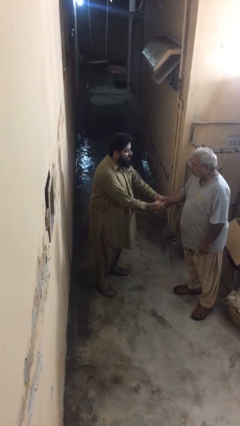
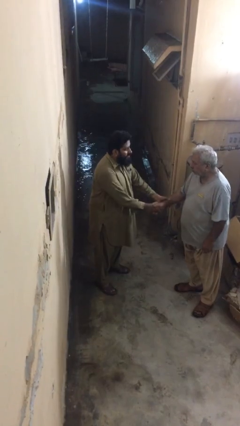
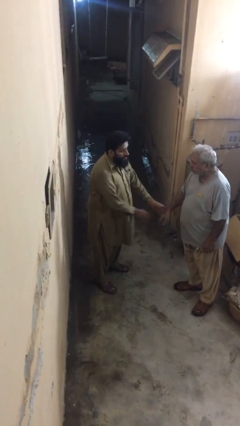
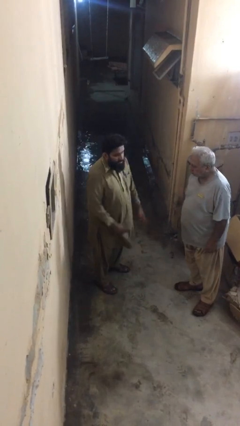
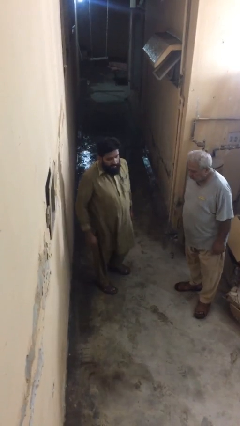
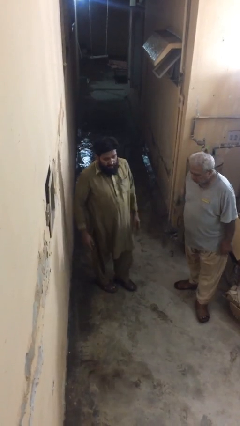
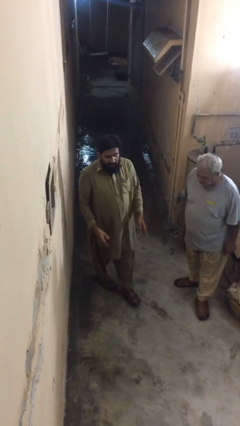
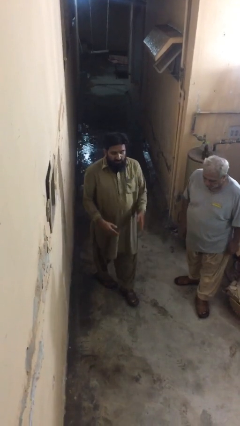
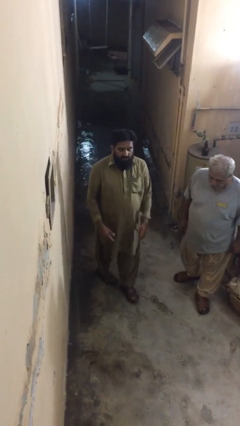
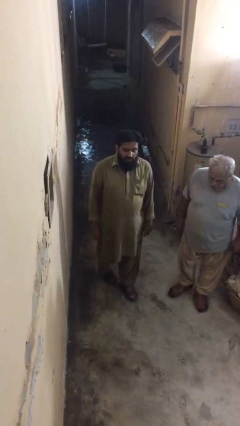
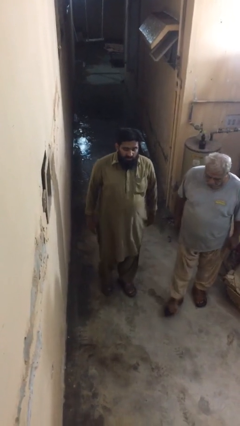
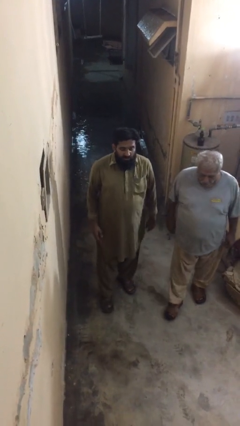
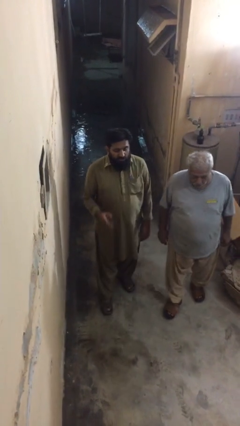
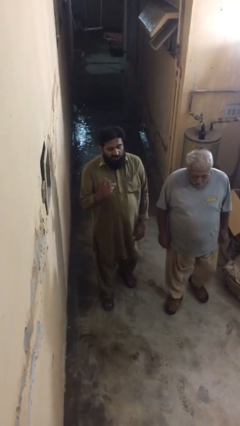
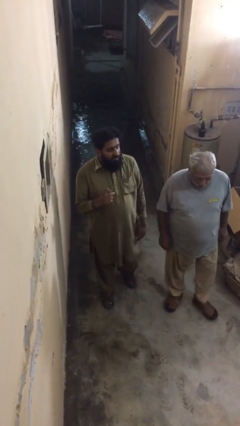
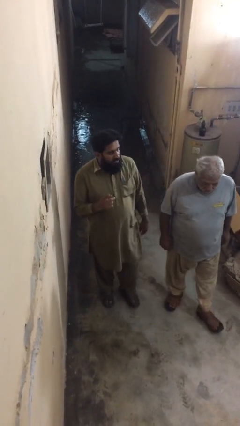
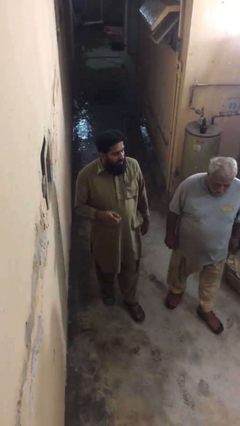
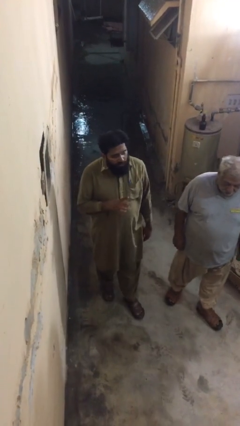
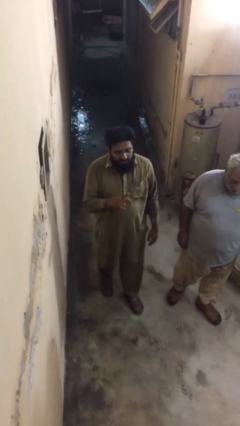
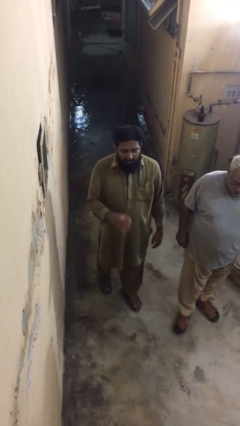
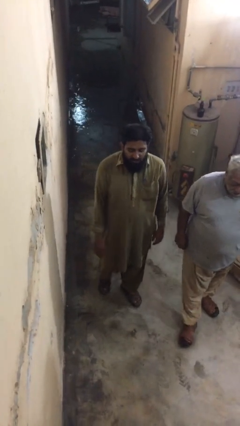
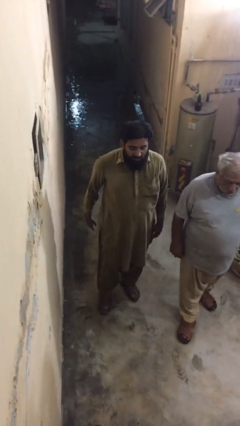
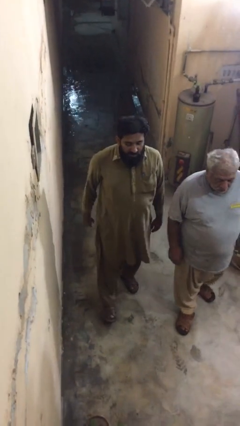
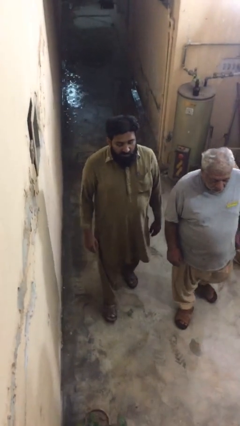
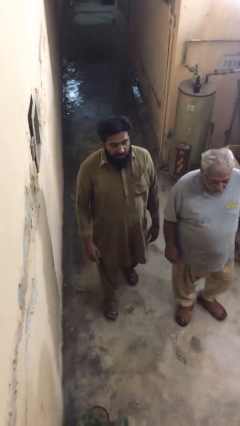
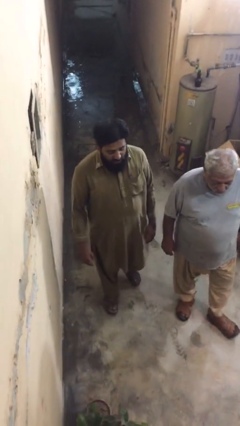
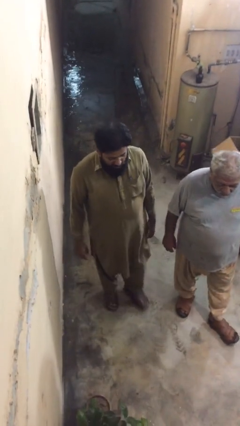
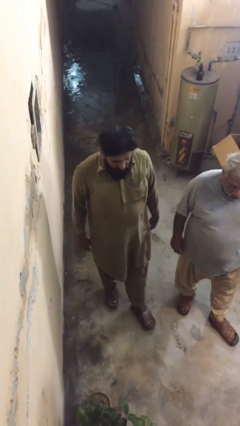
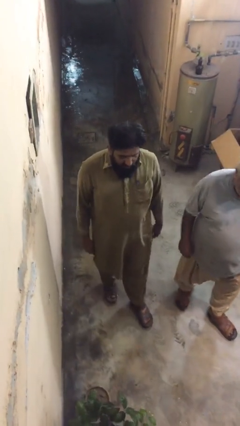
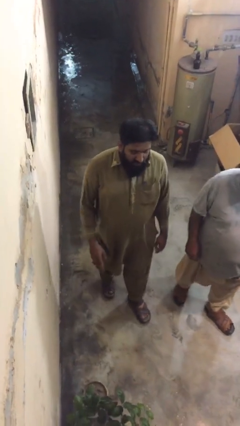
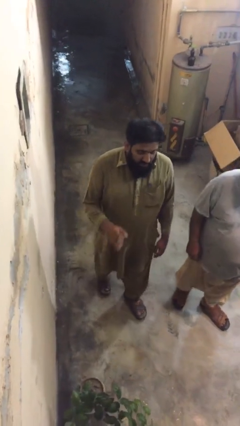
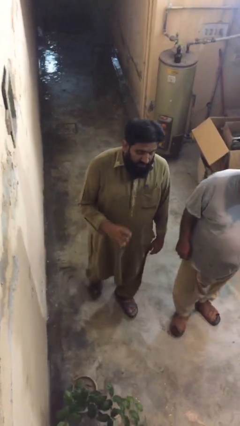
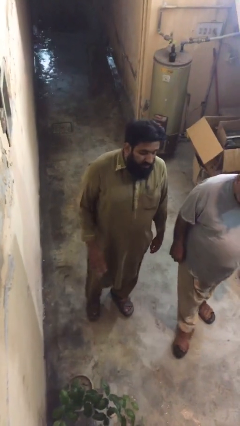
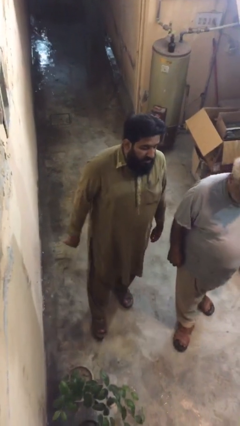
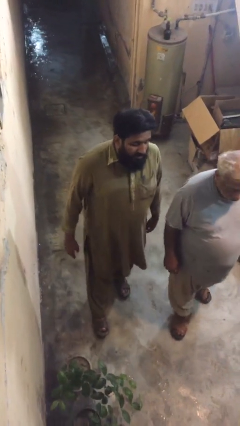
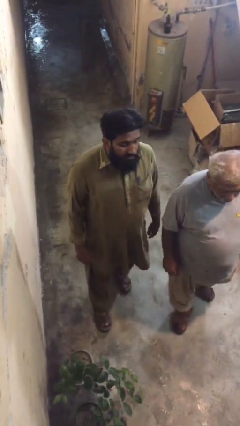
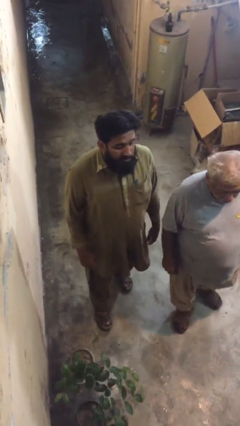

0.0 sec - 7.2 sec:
person talks to person

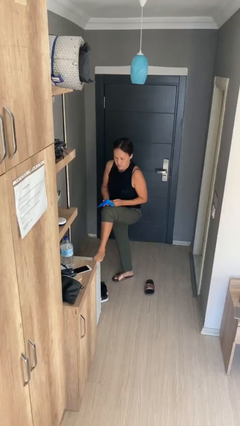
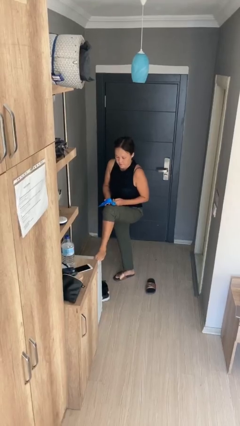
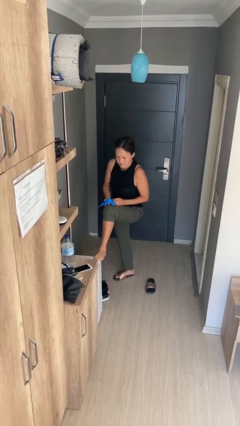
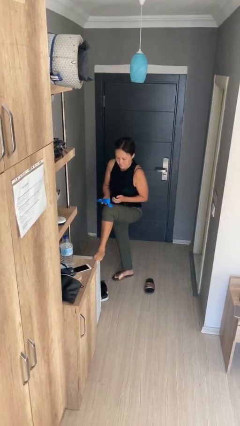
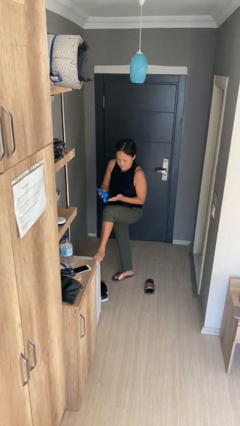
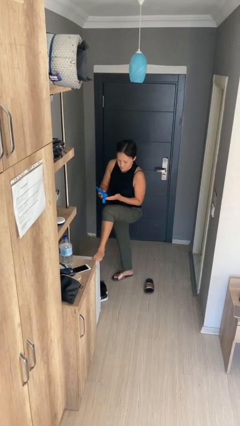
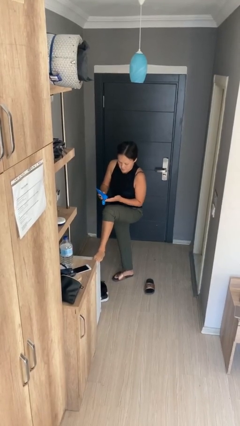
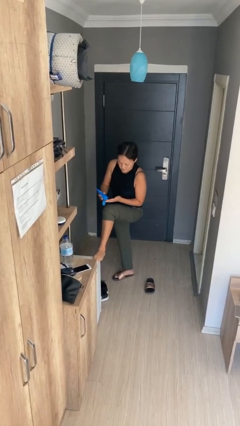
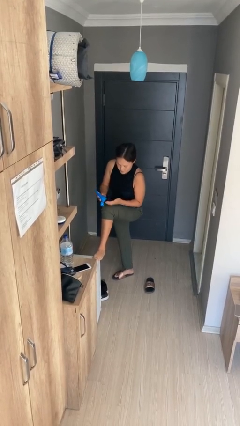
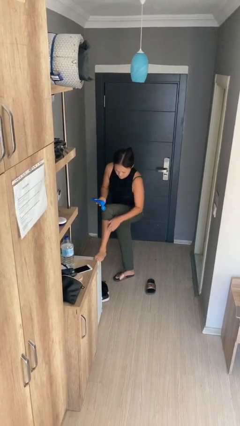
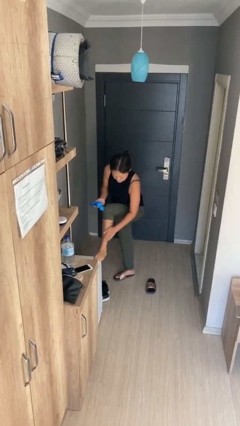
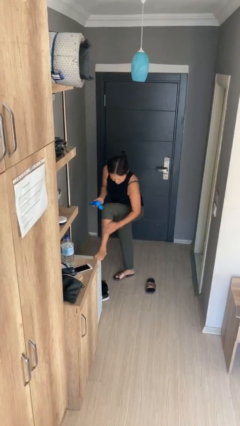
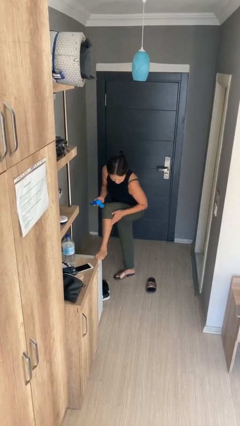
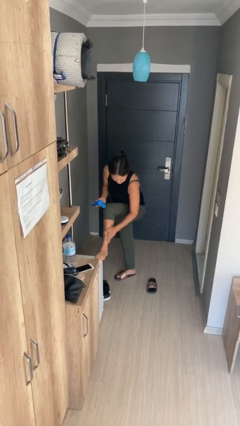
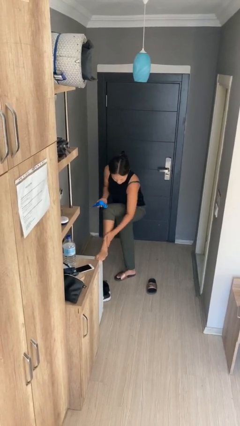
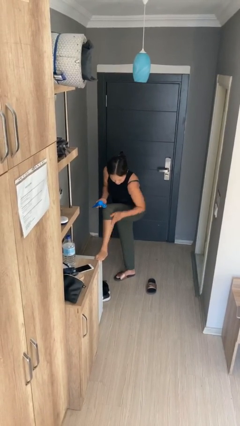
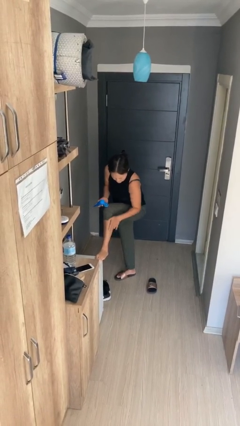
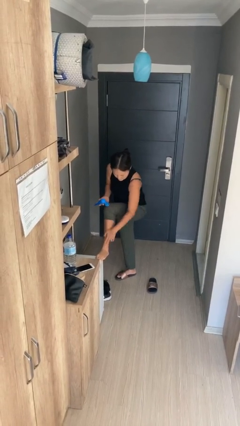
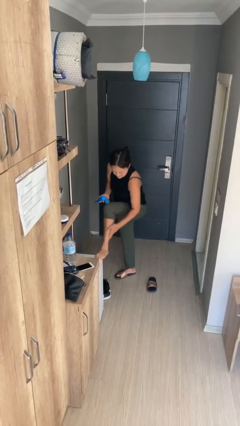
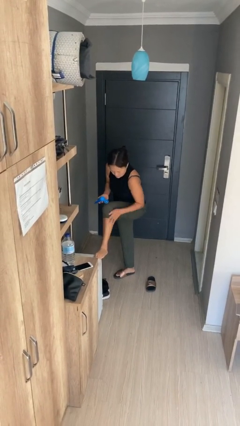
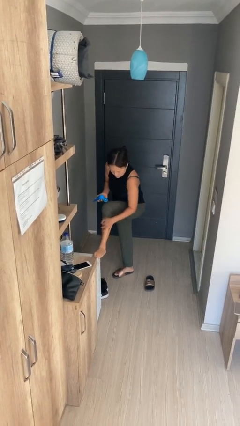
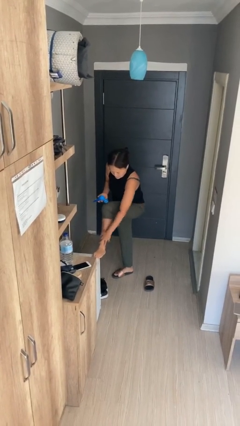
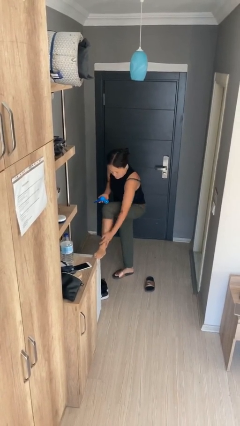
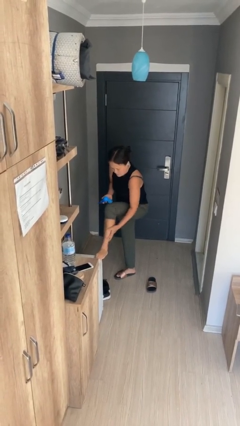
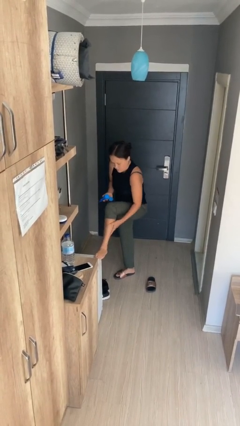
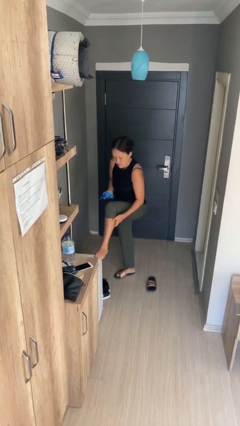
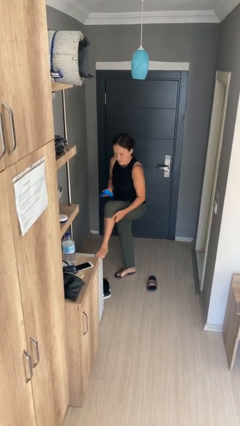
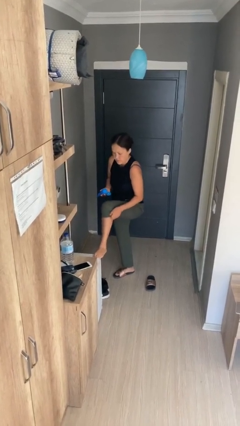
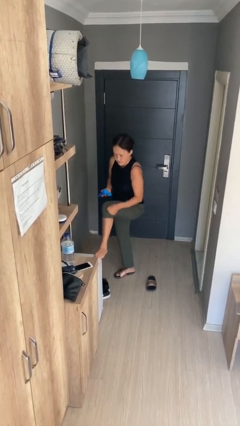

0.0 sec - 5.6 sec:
person applies sunscreen

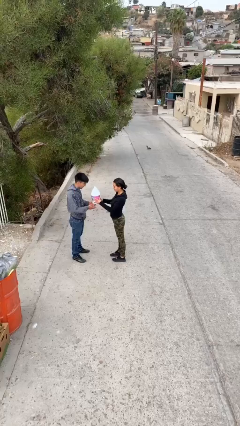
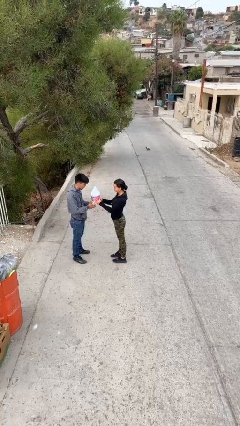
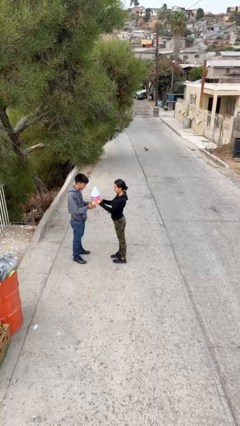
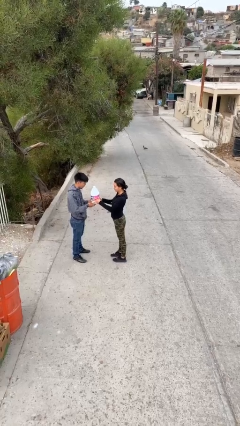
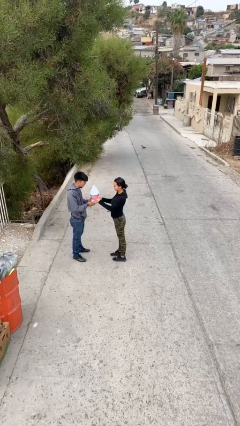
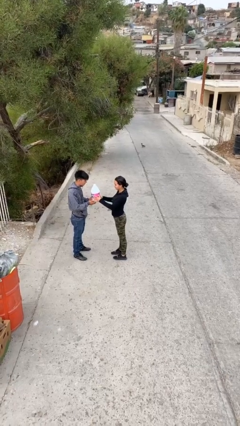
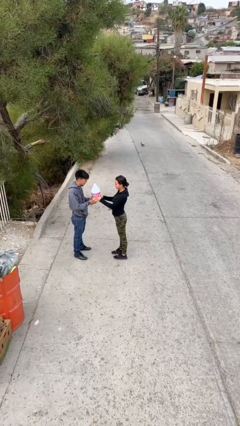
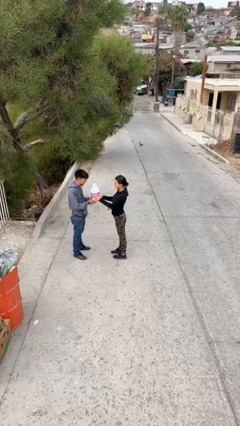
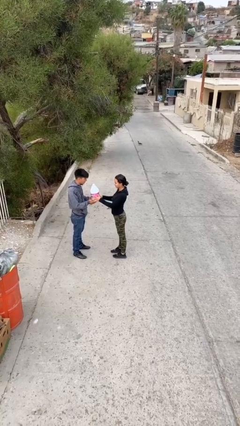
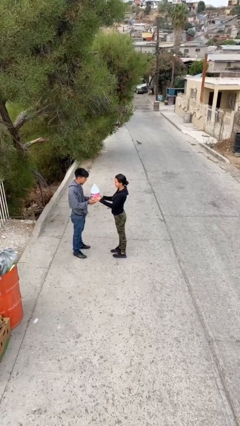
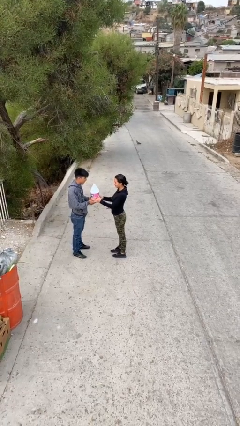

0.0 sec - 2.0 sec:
person transfers object to person

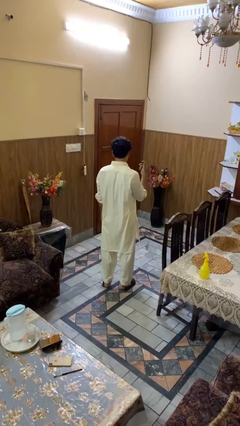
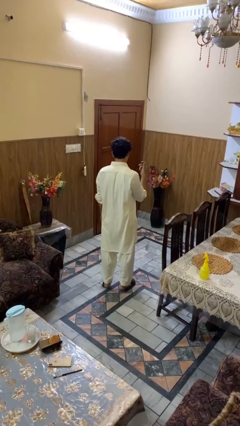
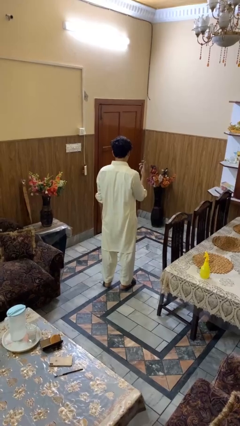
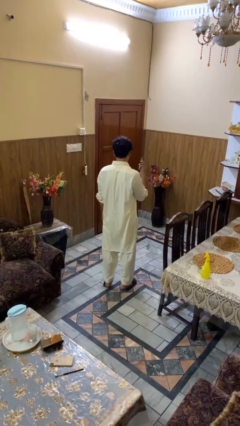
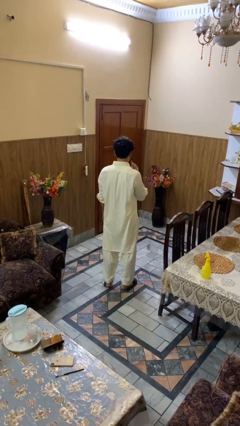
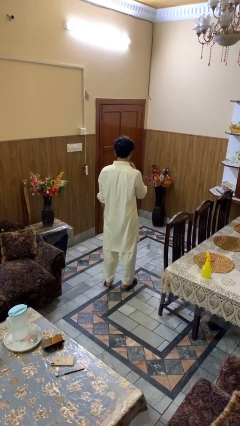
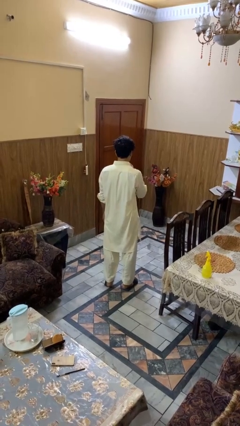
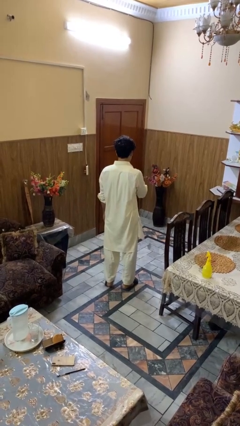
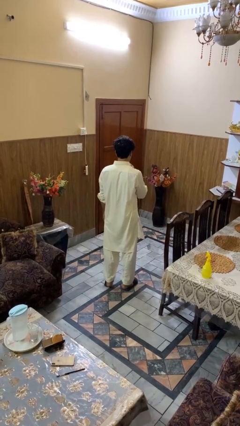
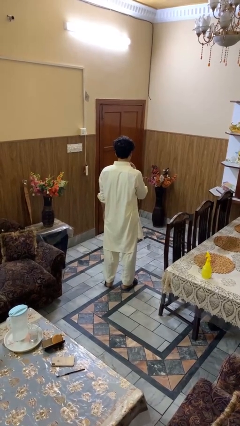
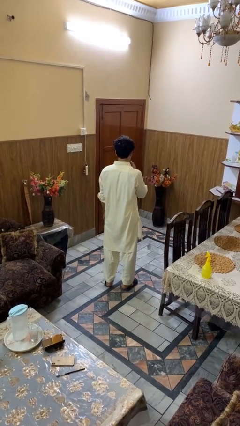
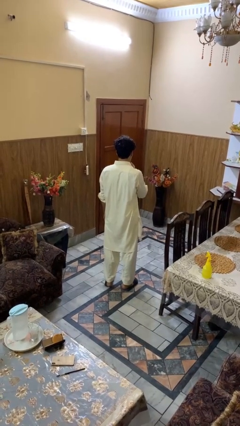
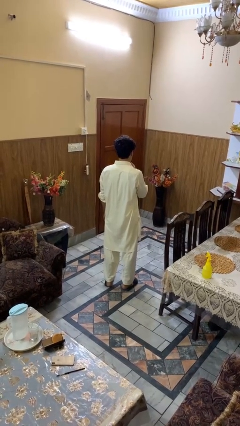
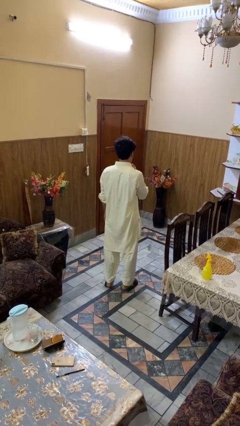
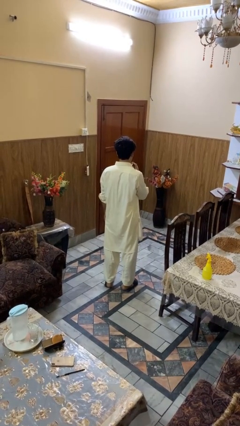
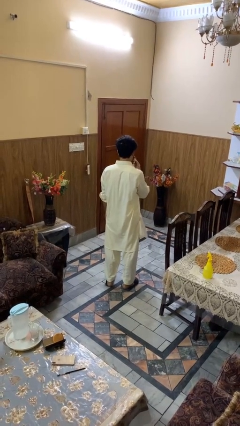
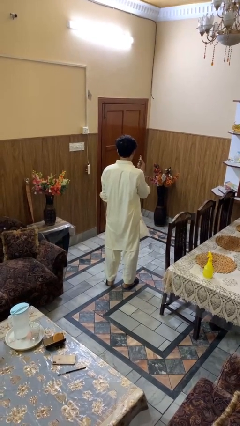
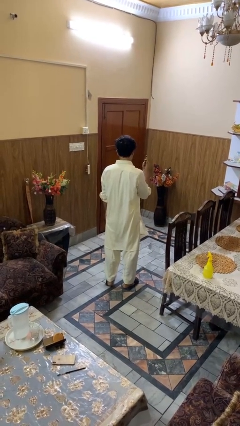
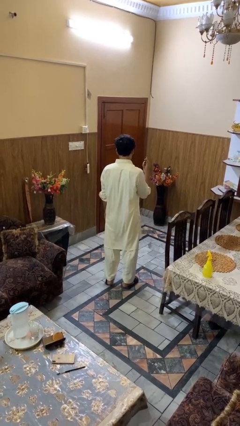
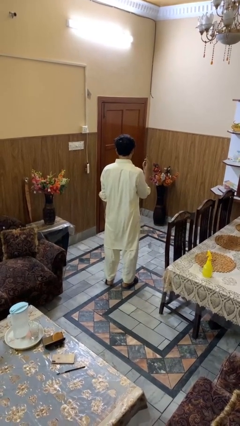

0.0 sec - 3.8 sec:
person applies lip makeup
